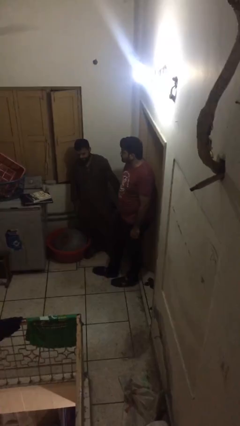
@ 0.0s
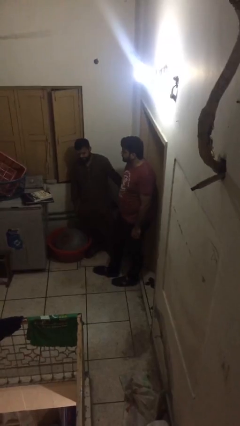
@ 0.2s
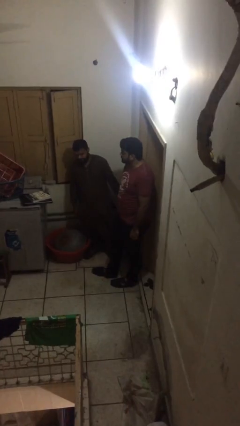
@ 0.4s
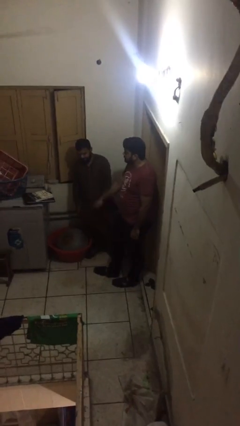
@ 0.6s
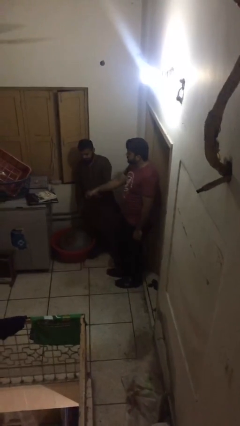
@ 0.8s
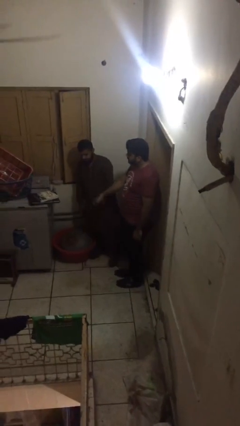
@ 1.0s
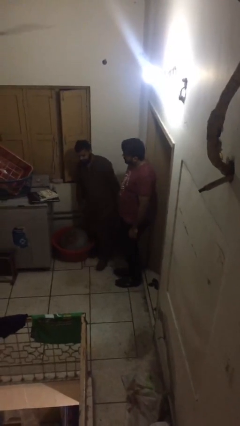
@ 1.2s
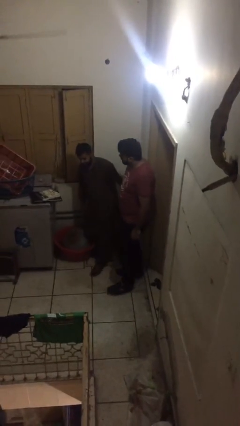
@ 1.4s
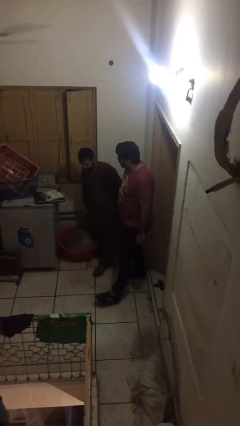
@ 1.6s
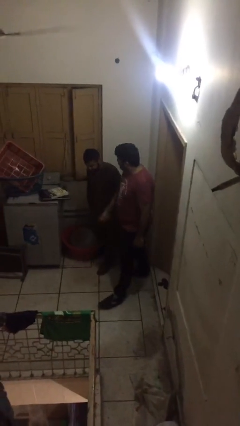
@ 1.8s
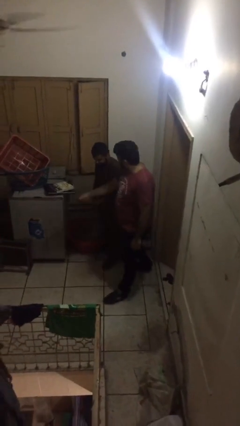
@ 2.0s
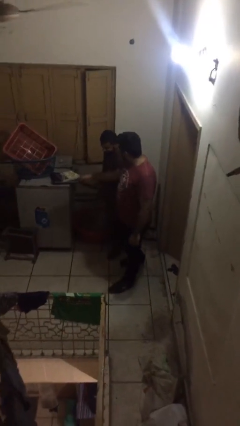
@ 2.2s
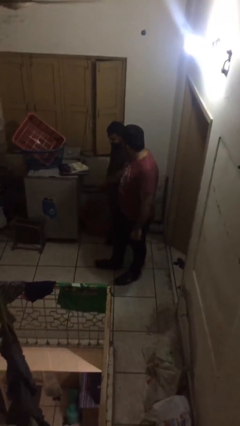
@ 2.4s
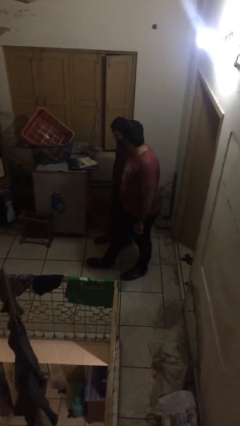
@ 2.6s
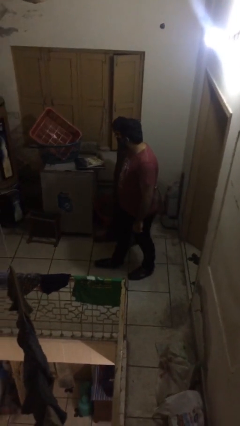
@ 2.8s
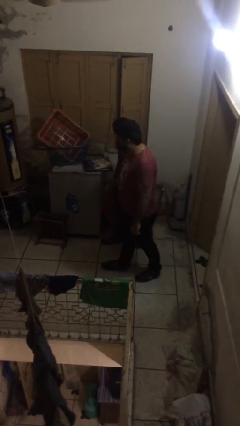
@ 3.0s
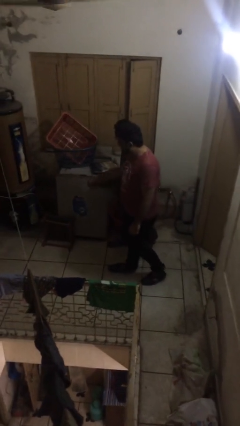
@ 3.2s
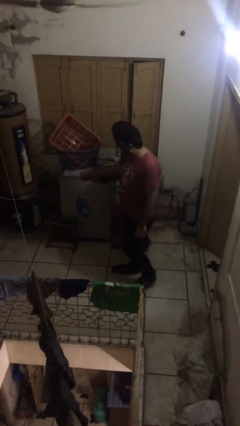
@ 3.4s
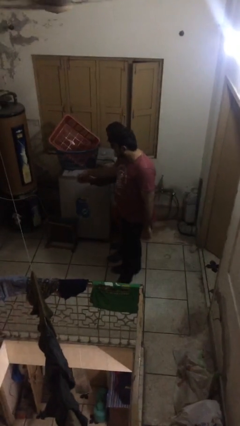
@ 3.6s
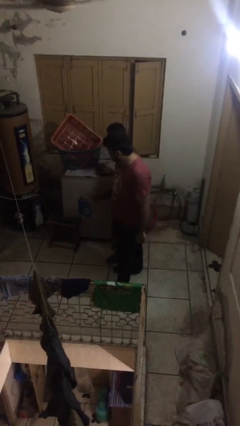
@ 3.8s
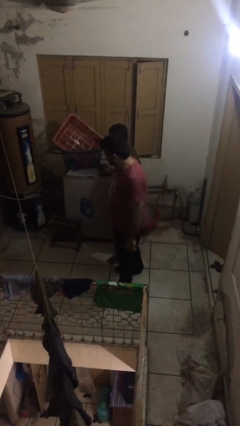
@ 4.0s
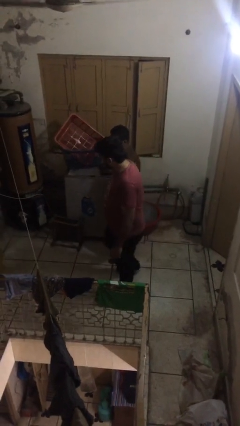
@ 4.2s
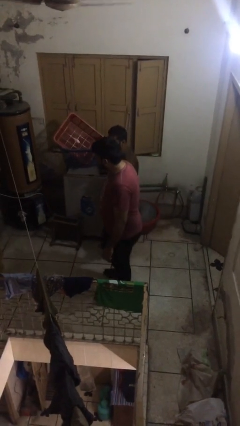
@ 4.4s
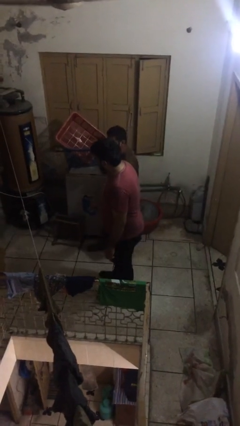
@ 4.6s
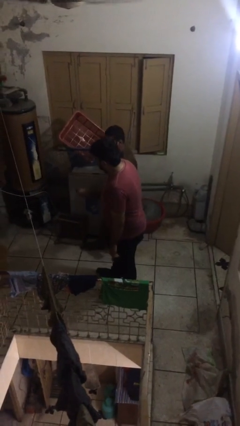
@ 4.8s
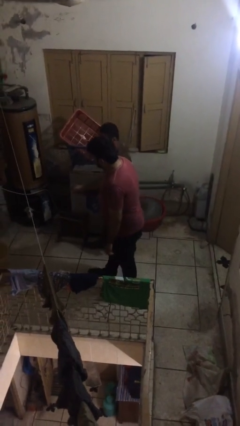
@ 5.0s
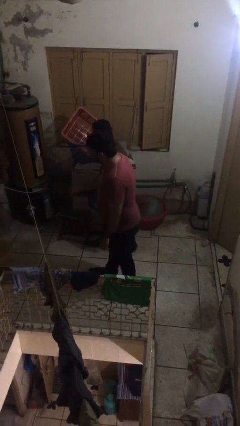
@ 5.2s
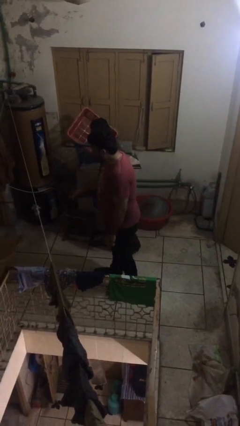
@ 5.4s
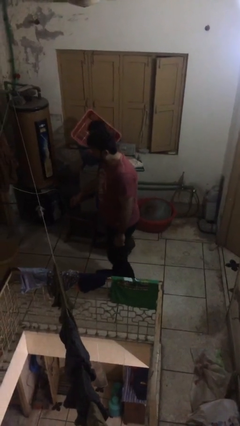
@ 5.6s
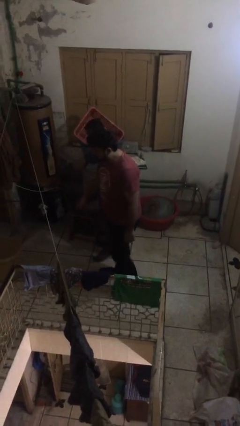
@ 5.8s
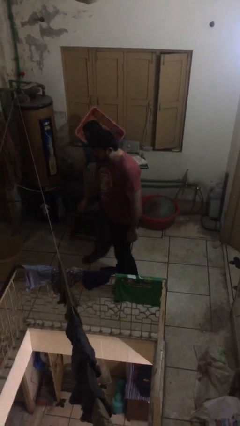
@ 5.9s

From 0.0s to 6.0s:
person holds hand

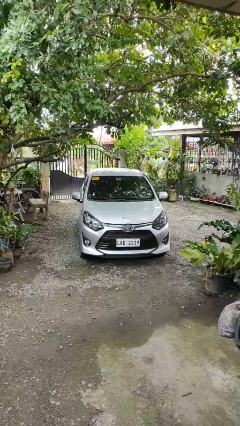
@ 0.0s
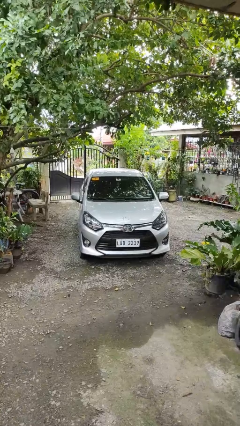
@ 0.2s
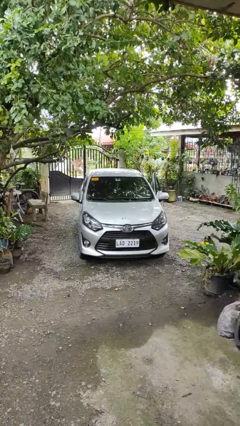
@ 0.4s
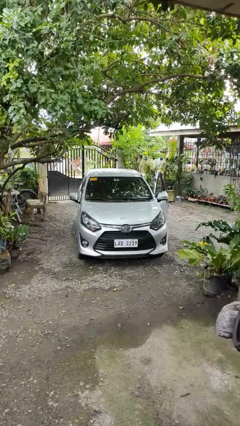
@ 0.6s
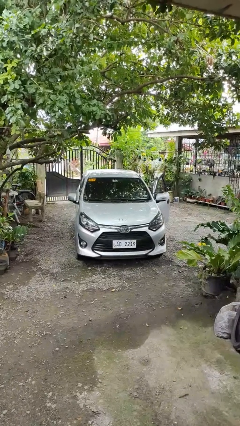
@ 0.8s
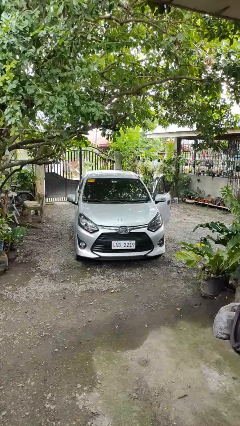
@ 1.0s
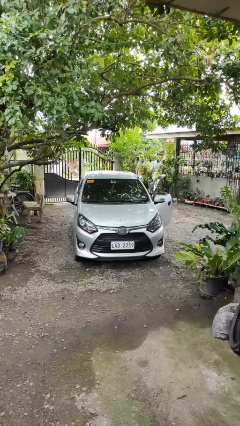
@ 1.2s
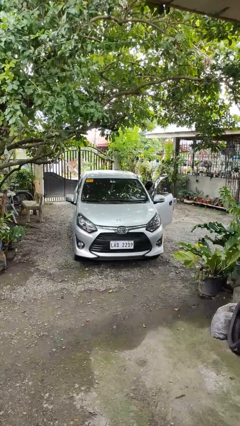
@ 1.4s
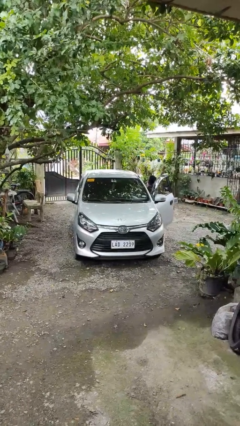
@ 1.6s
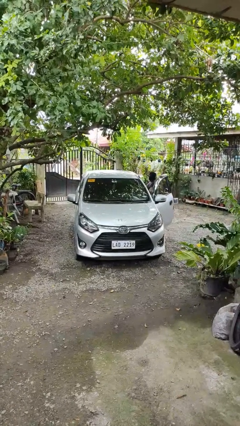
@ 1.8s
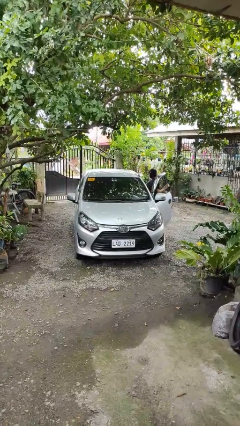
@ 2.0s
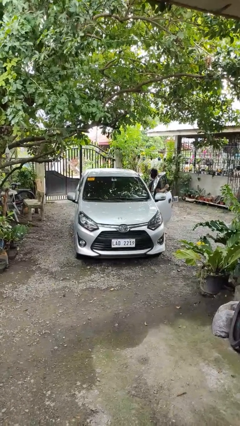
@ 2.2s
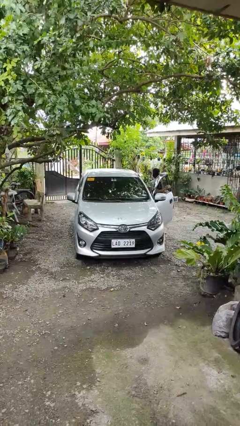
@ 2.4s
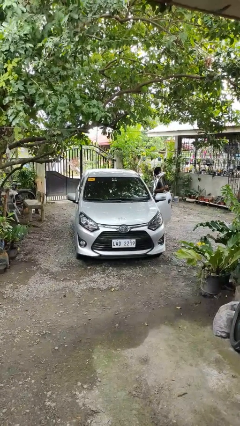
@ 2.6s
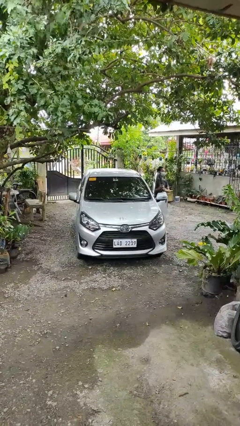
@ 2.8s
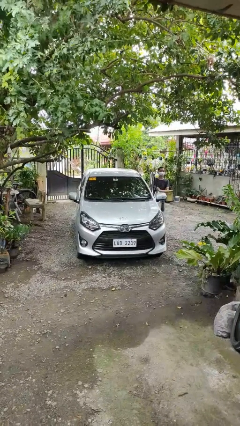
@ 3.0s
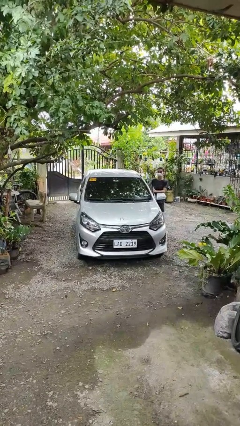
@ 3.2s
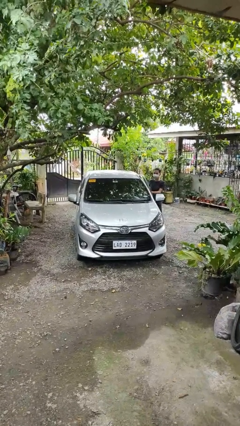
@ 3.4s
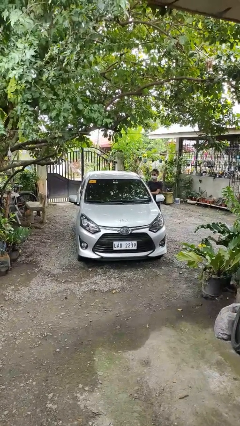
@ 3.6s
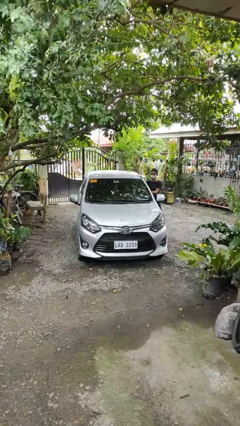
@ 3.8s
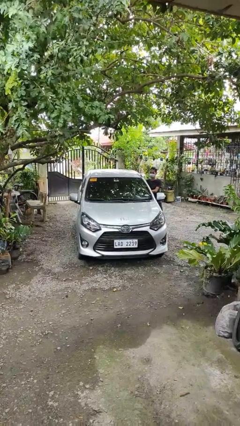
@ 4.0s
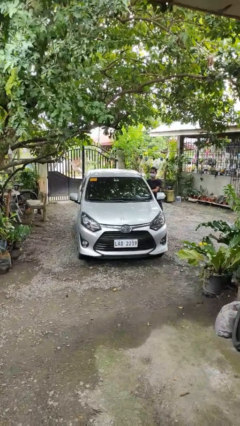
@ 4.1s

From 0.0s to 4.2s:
car drops off person

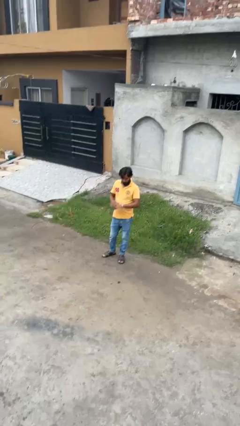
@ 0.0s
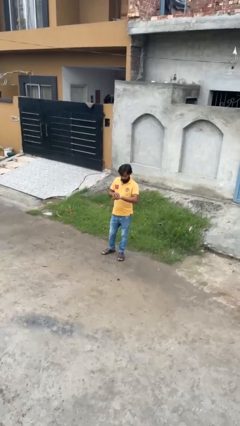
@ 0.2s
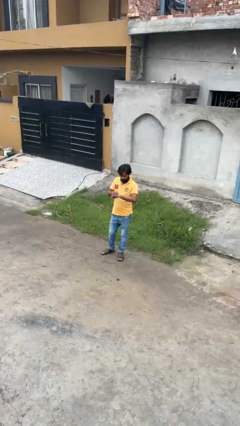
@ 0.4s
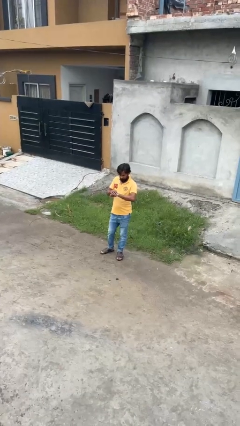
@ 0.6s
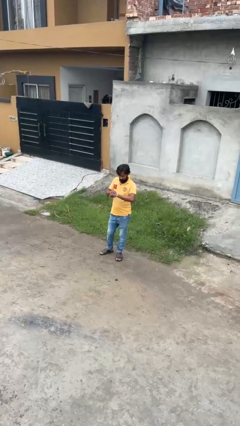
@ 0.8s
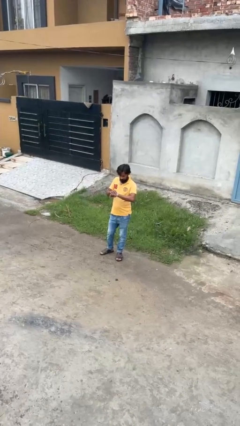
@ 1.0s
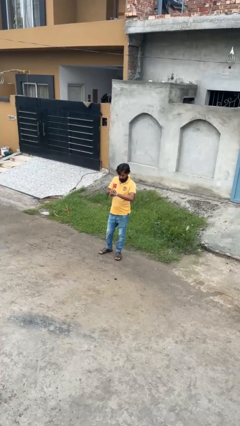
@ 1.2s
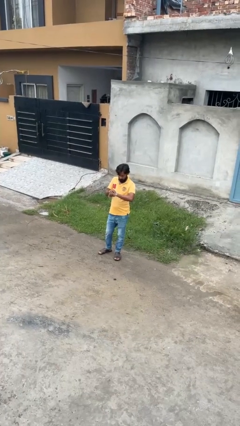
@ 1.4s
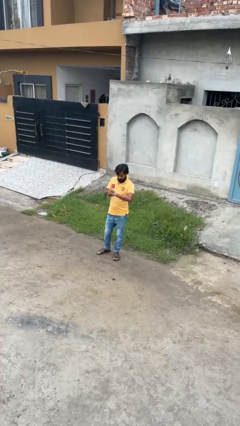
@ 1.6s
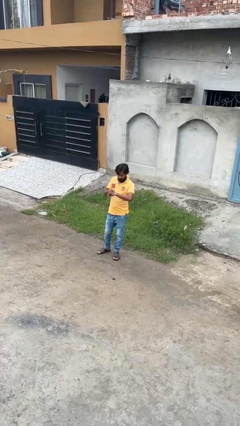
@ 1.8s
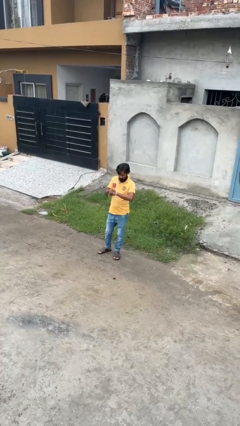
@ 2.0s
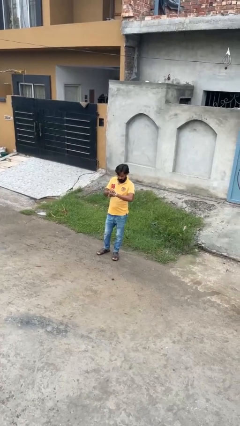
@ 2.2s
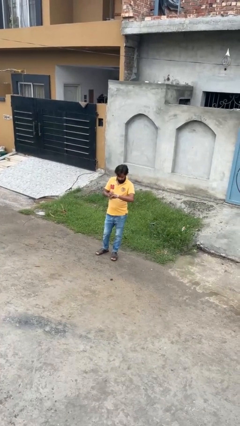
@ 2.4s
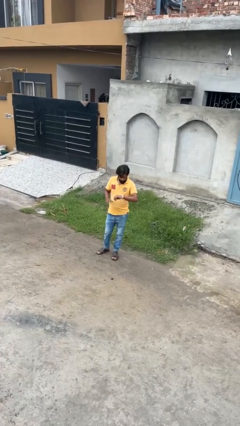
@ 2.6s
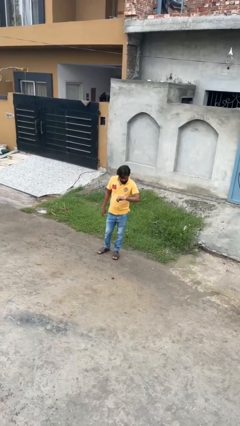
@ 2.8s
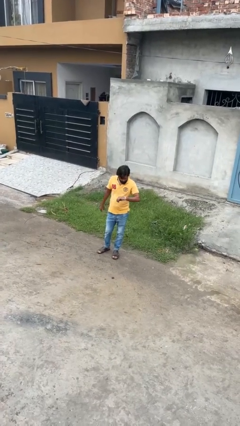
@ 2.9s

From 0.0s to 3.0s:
person looks at wristwatch

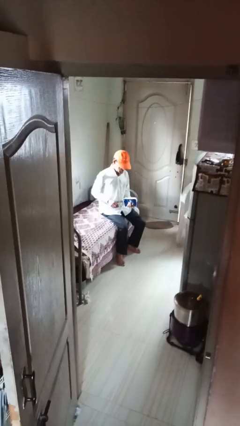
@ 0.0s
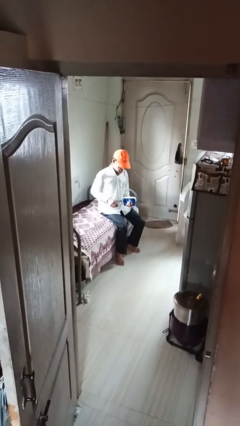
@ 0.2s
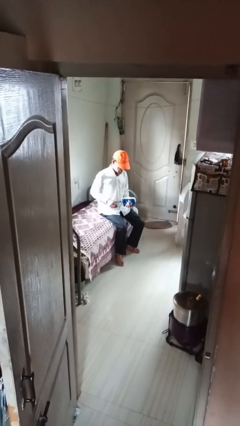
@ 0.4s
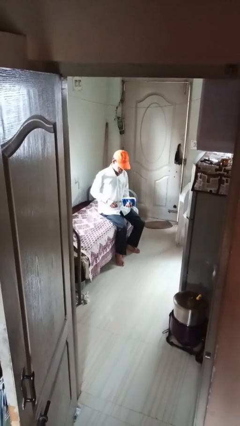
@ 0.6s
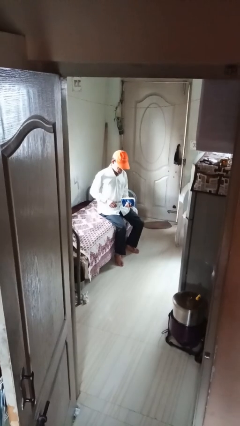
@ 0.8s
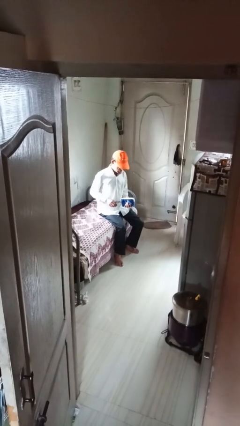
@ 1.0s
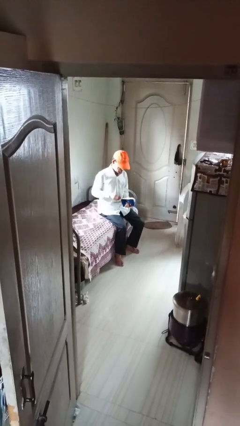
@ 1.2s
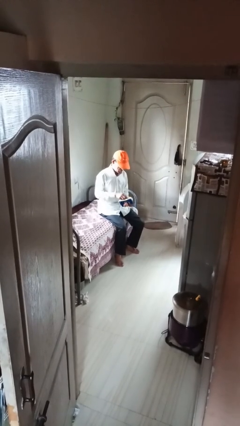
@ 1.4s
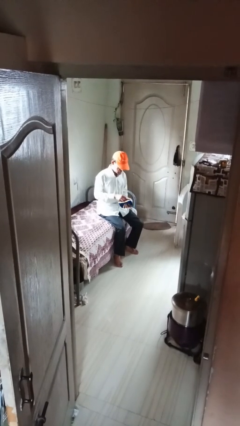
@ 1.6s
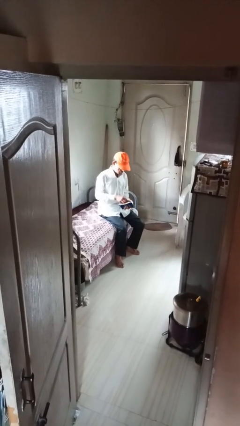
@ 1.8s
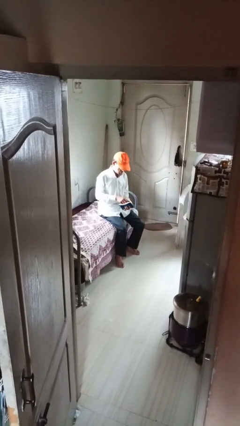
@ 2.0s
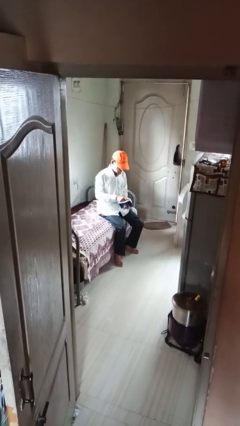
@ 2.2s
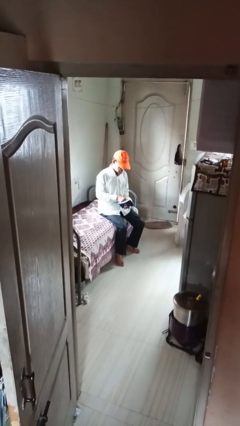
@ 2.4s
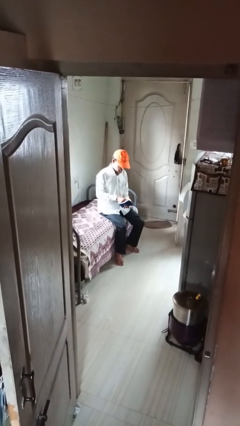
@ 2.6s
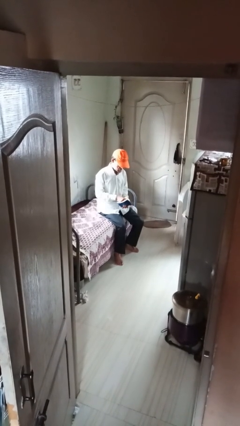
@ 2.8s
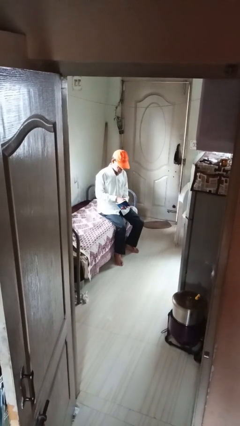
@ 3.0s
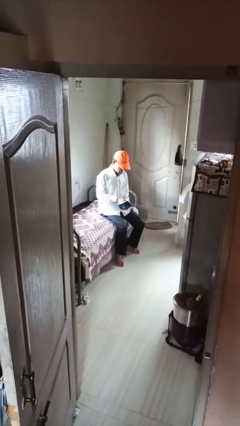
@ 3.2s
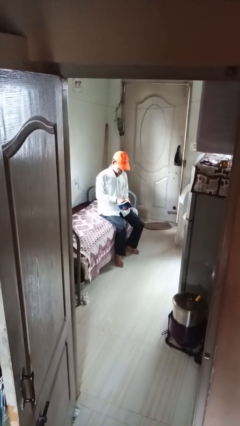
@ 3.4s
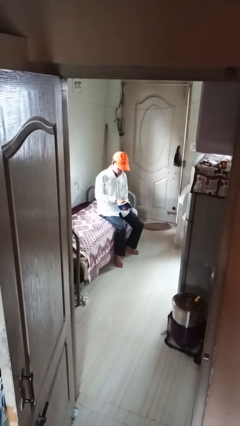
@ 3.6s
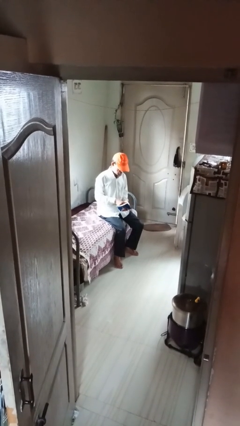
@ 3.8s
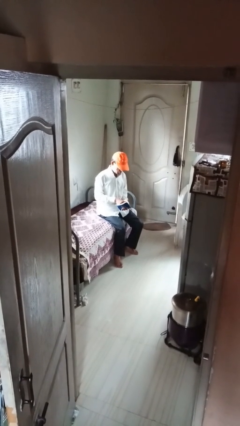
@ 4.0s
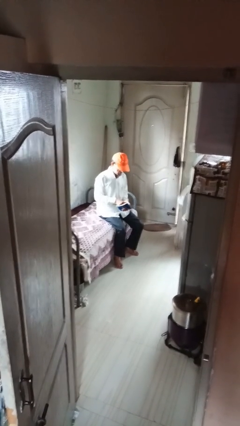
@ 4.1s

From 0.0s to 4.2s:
person searches in purse
